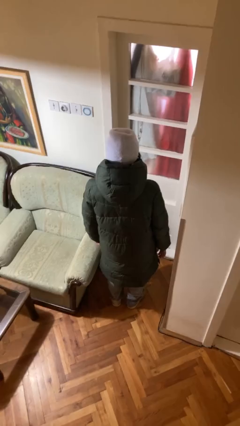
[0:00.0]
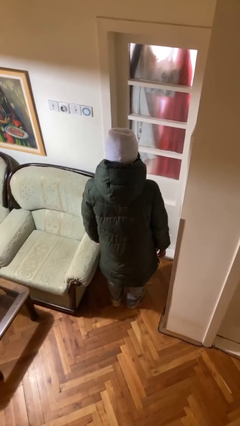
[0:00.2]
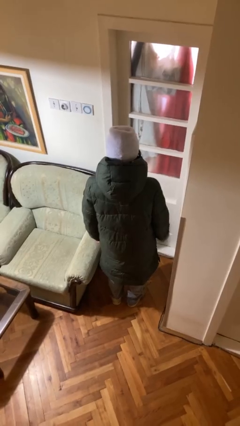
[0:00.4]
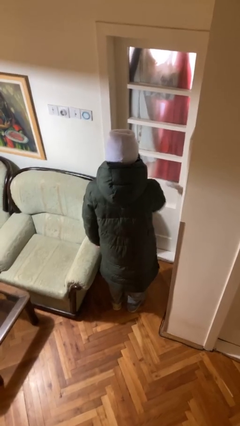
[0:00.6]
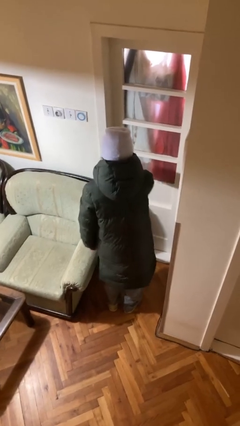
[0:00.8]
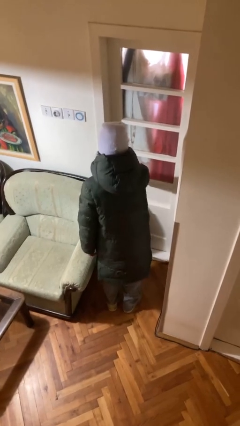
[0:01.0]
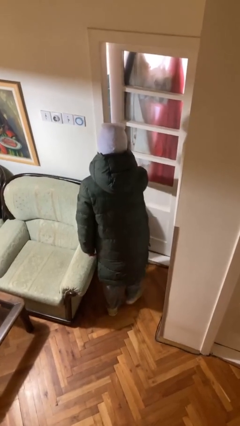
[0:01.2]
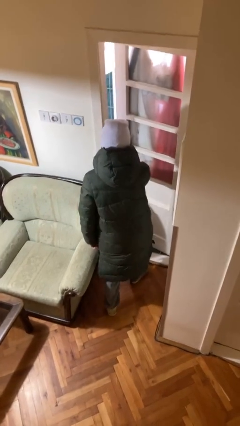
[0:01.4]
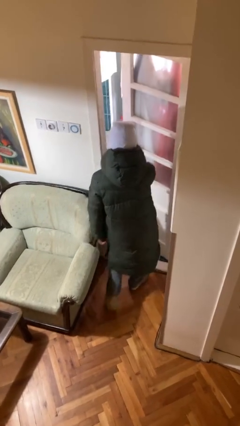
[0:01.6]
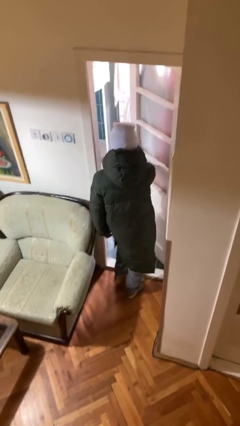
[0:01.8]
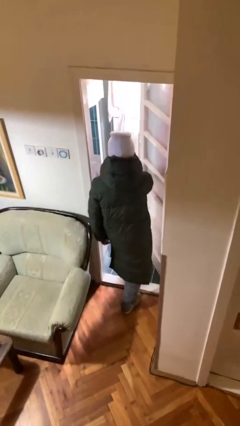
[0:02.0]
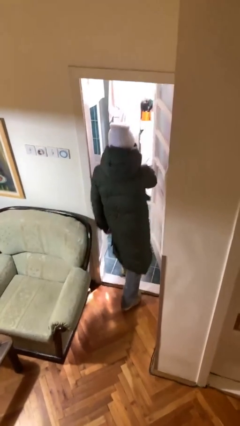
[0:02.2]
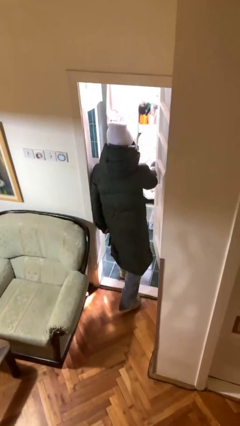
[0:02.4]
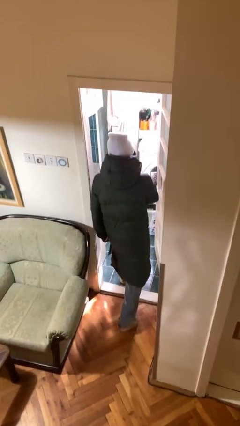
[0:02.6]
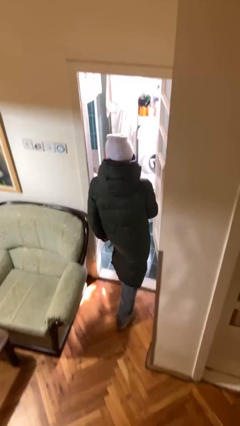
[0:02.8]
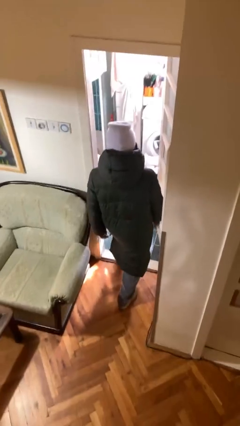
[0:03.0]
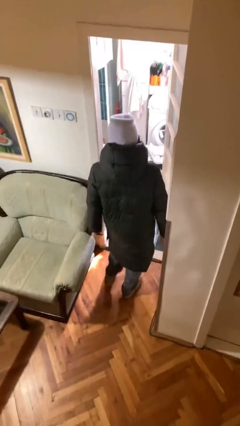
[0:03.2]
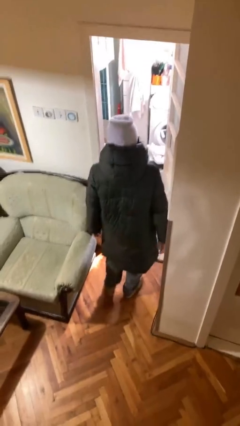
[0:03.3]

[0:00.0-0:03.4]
person opens facility door

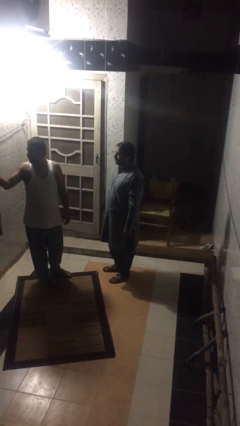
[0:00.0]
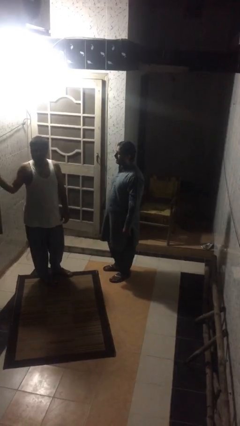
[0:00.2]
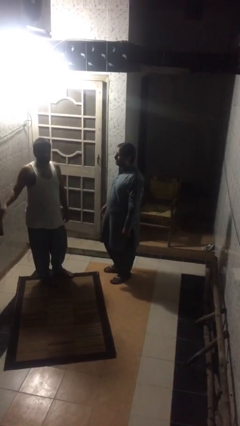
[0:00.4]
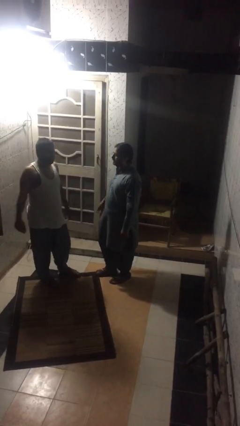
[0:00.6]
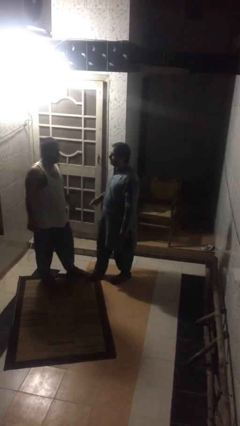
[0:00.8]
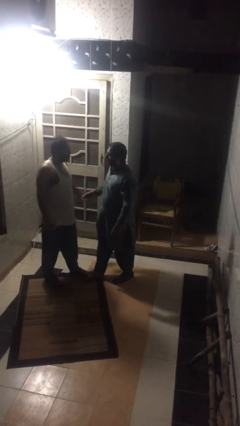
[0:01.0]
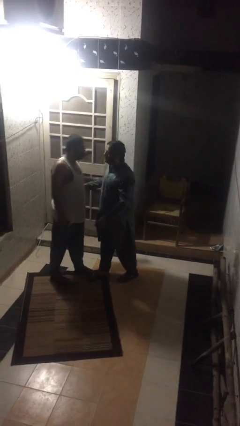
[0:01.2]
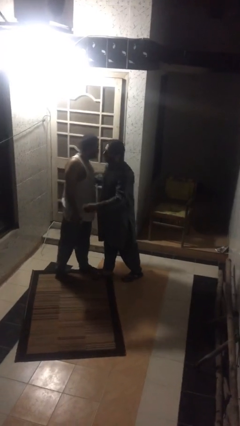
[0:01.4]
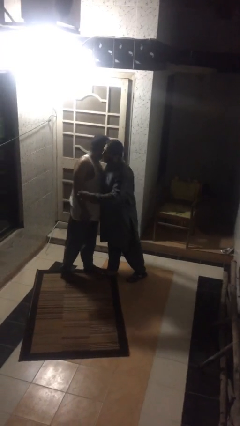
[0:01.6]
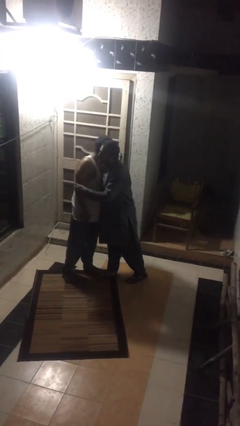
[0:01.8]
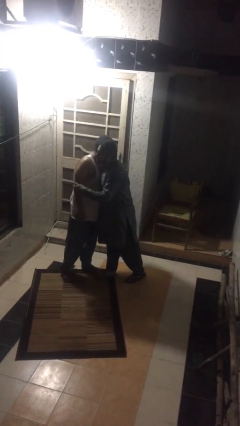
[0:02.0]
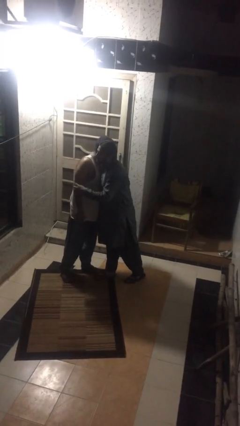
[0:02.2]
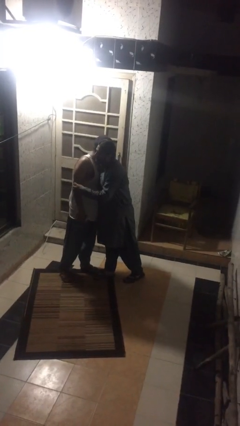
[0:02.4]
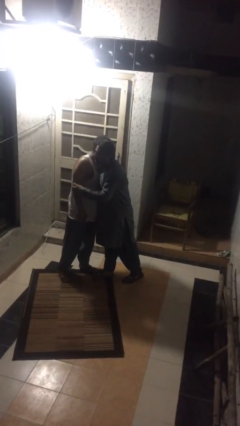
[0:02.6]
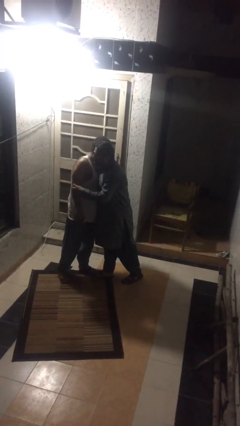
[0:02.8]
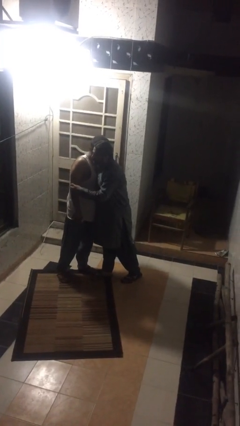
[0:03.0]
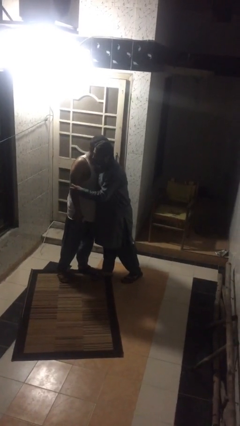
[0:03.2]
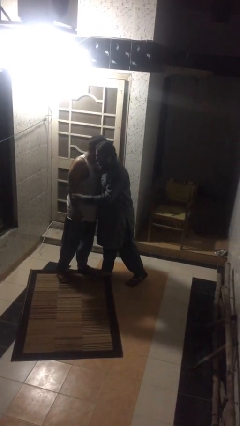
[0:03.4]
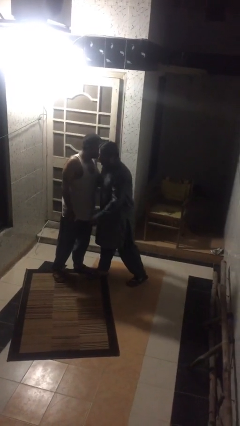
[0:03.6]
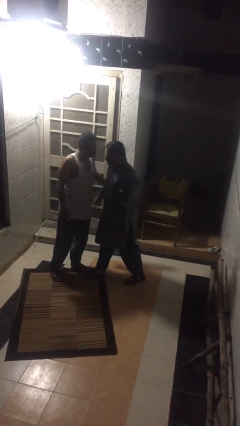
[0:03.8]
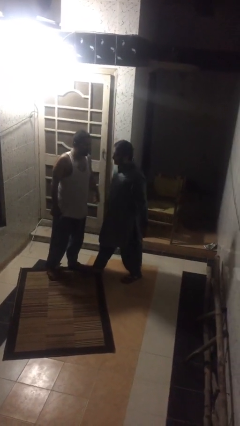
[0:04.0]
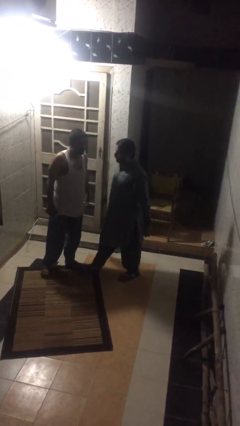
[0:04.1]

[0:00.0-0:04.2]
person embraces person

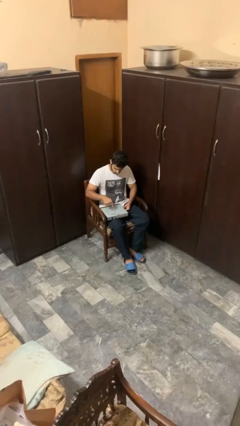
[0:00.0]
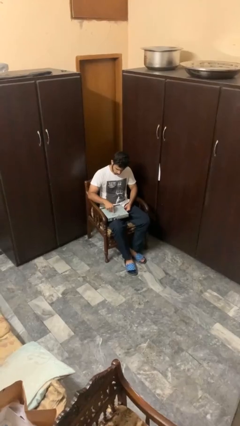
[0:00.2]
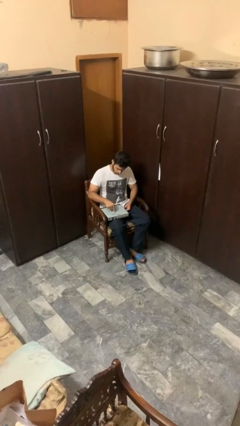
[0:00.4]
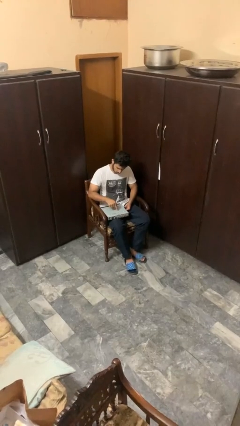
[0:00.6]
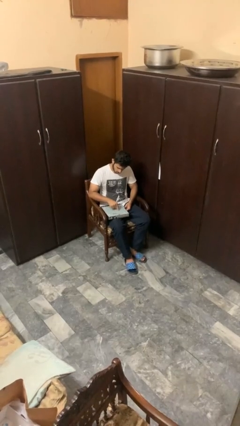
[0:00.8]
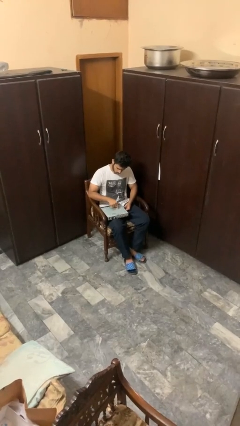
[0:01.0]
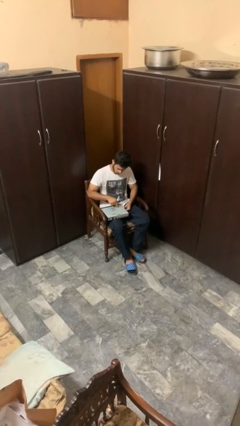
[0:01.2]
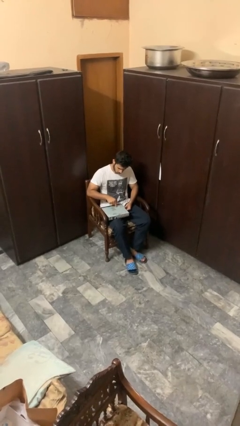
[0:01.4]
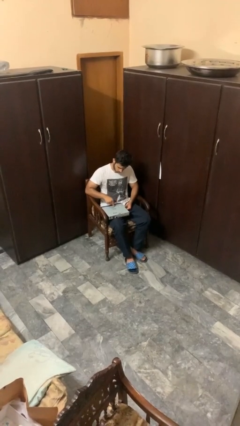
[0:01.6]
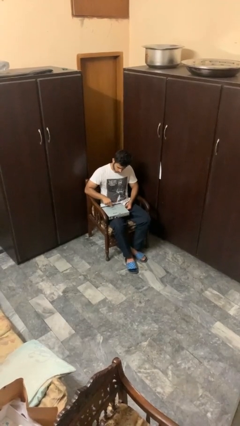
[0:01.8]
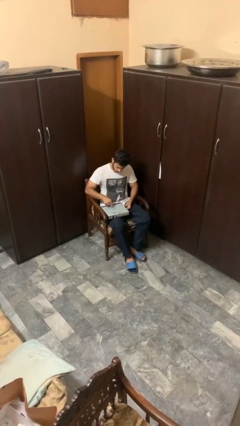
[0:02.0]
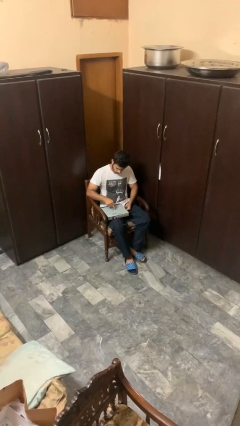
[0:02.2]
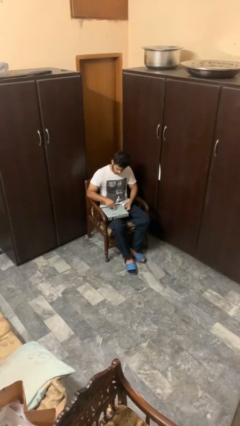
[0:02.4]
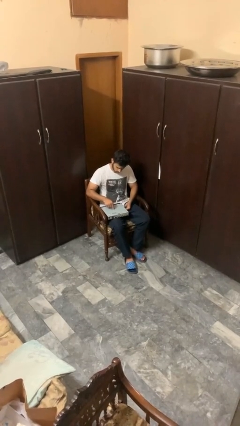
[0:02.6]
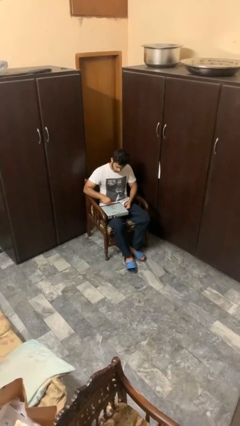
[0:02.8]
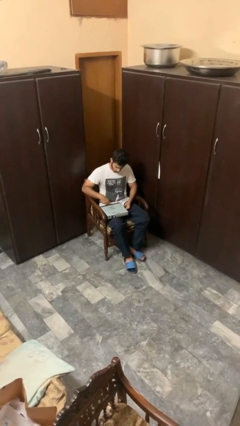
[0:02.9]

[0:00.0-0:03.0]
person taps object with finger

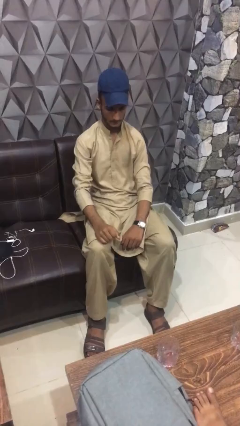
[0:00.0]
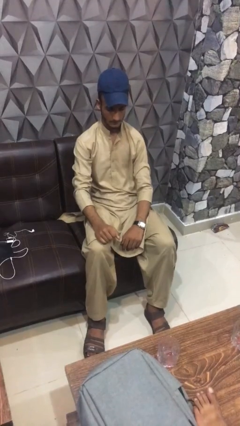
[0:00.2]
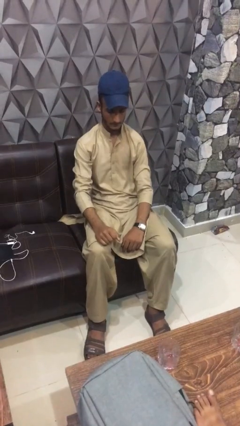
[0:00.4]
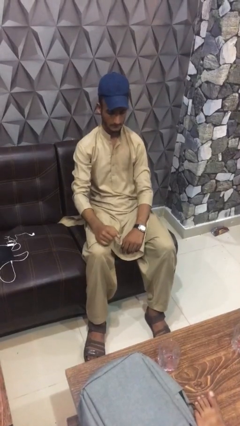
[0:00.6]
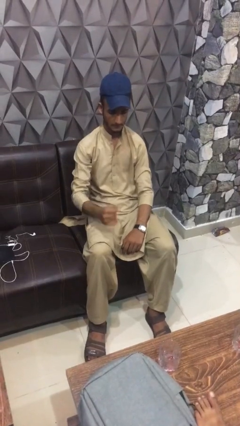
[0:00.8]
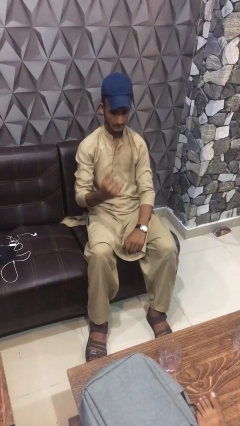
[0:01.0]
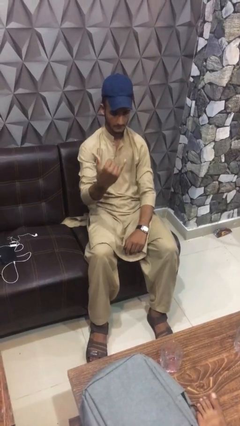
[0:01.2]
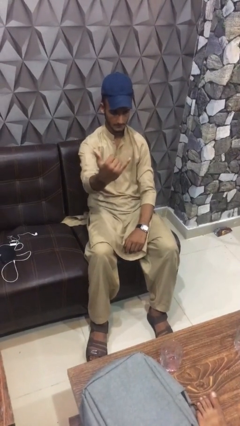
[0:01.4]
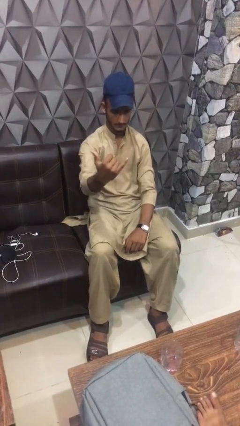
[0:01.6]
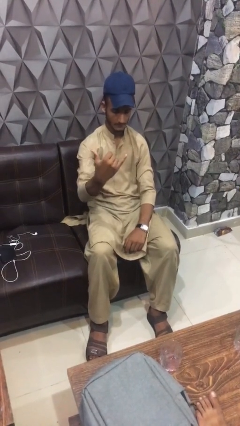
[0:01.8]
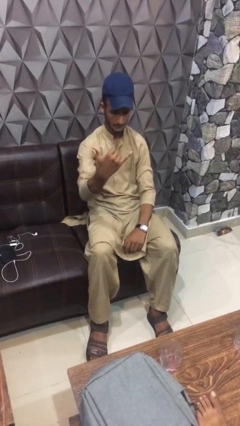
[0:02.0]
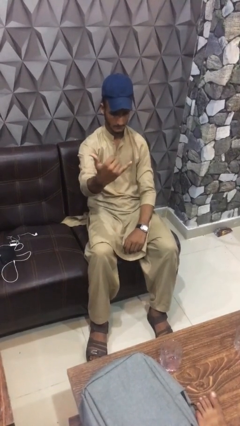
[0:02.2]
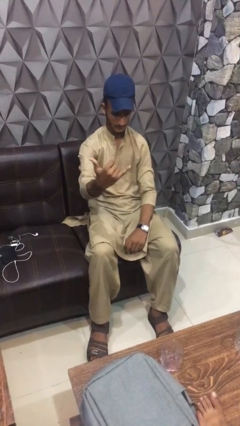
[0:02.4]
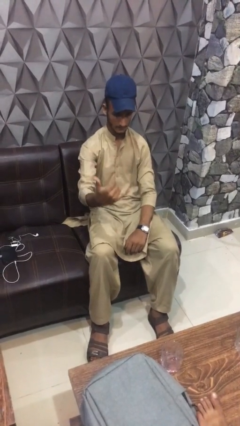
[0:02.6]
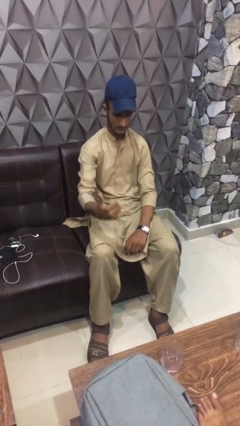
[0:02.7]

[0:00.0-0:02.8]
person gestures hang loose

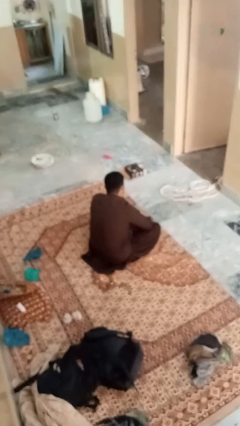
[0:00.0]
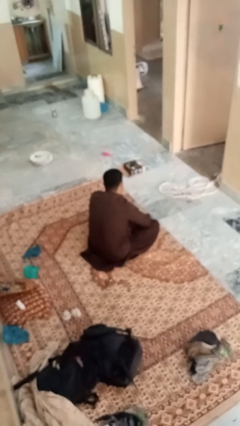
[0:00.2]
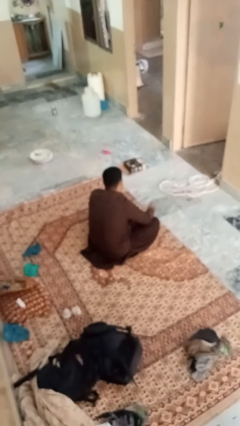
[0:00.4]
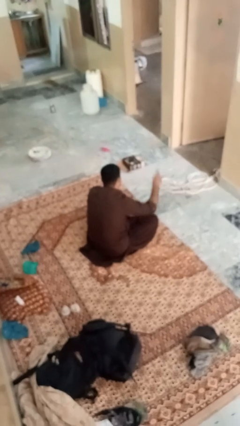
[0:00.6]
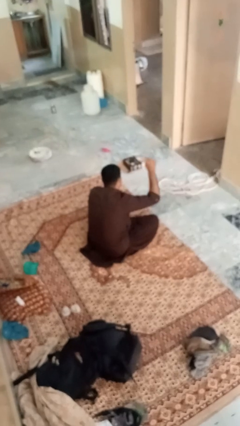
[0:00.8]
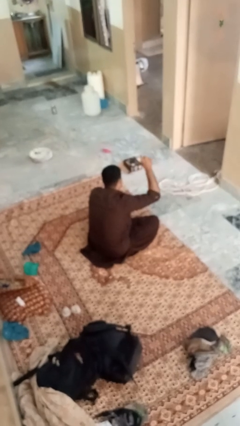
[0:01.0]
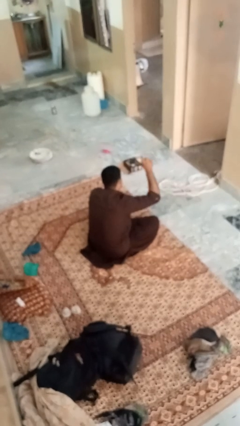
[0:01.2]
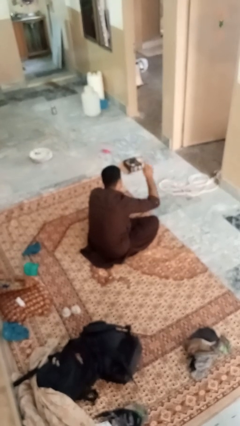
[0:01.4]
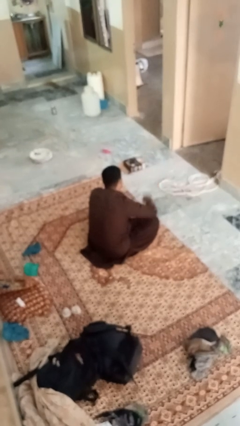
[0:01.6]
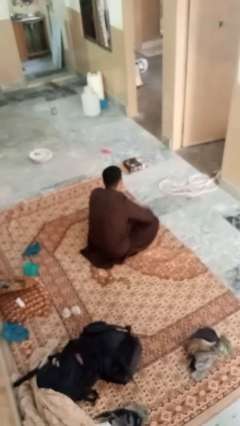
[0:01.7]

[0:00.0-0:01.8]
person gestures number one

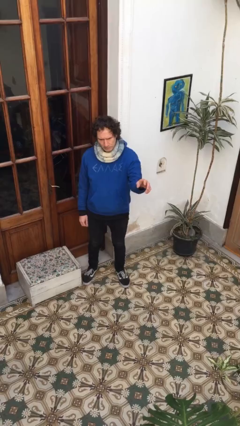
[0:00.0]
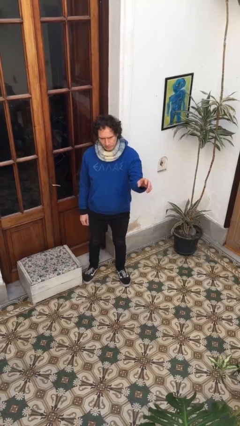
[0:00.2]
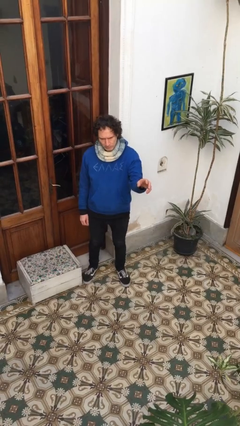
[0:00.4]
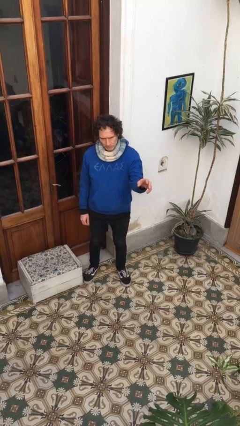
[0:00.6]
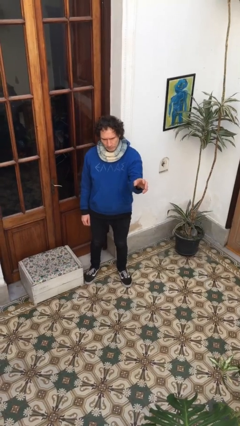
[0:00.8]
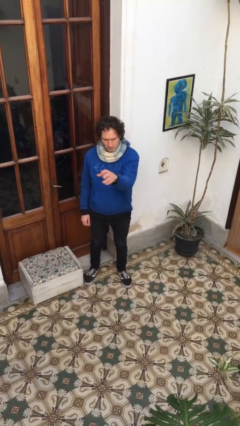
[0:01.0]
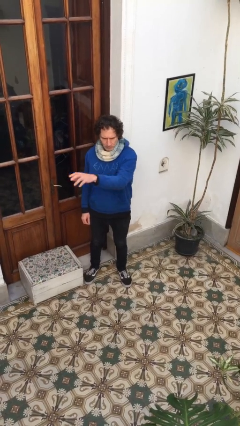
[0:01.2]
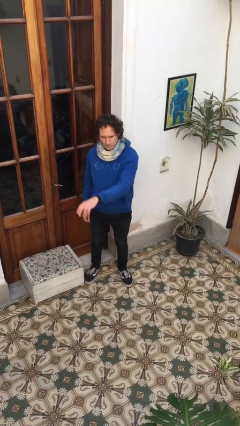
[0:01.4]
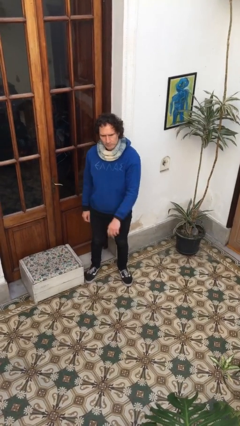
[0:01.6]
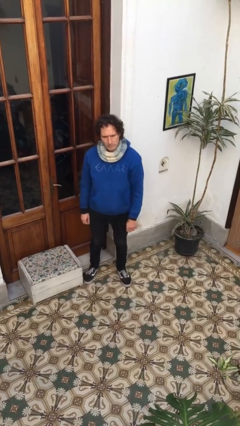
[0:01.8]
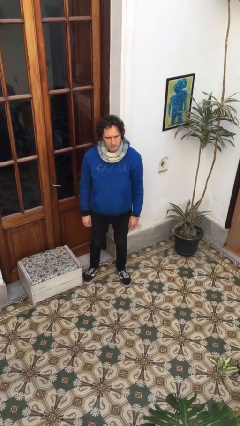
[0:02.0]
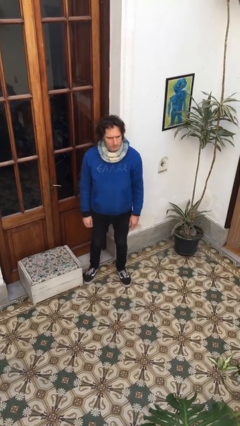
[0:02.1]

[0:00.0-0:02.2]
person gestures swipe right
